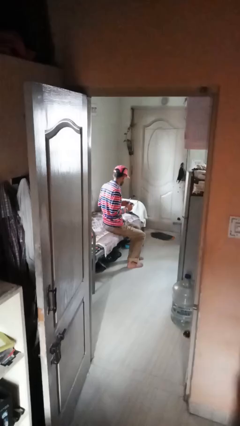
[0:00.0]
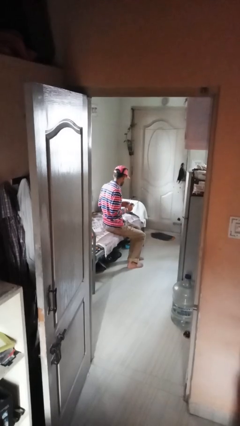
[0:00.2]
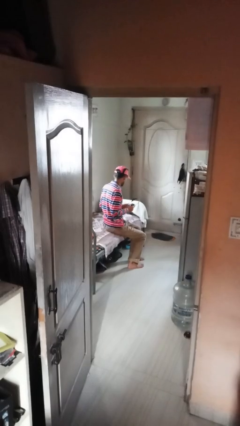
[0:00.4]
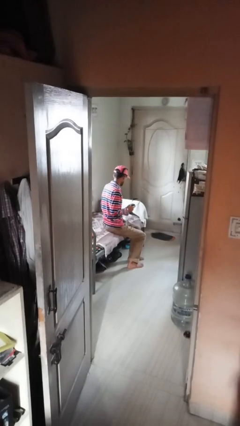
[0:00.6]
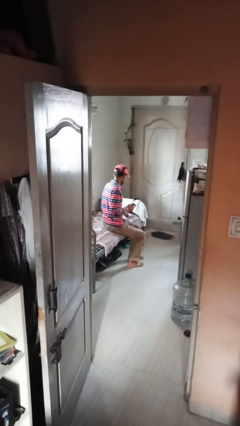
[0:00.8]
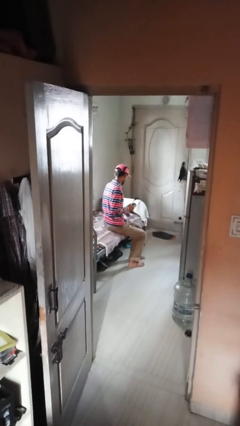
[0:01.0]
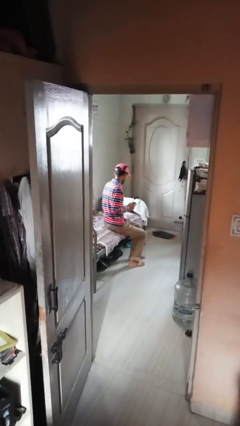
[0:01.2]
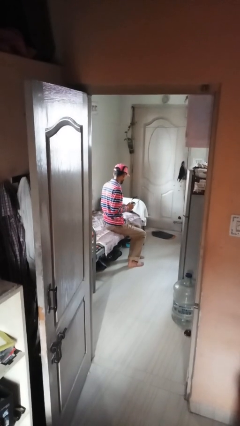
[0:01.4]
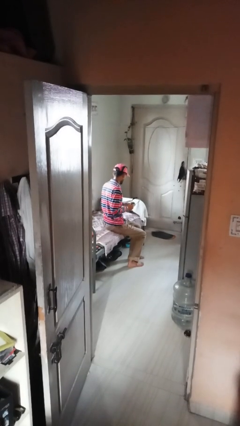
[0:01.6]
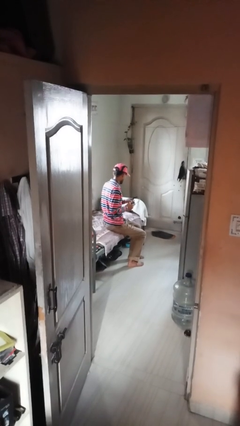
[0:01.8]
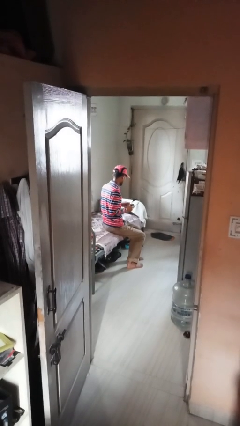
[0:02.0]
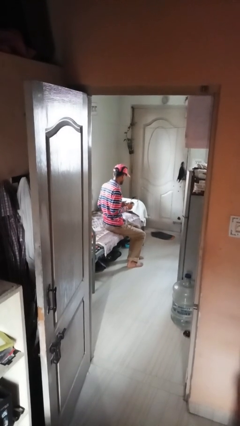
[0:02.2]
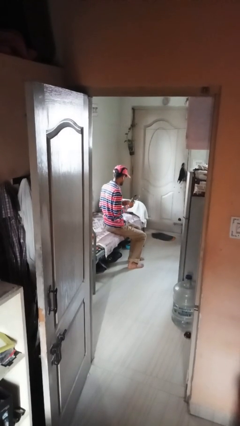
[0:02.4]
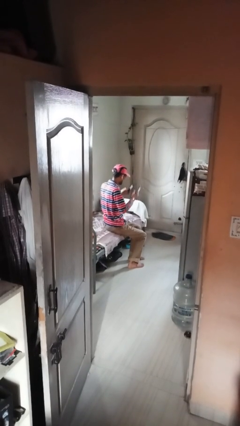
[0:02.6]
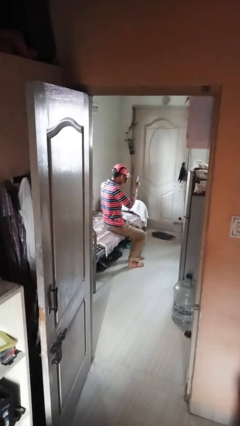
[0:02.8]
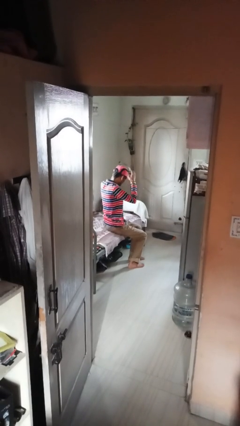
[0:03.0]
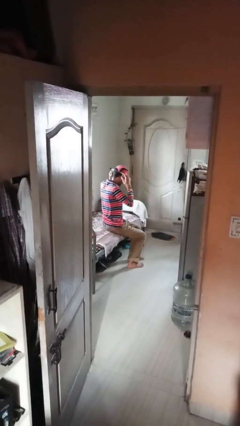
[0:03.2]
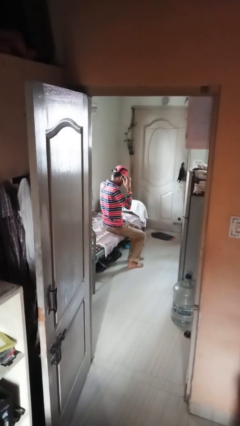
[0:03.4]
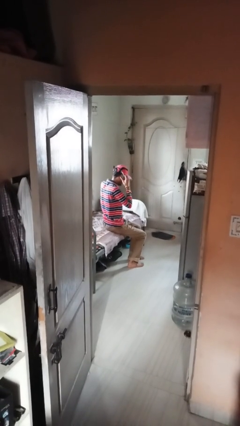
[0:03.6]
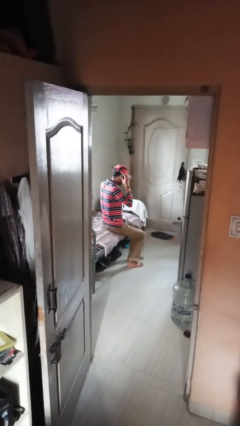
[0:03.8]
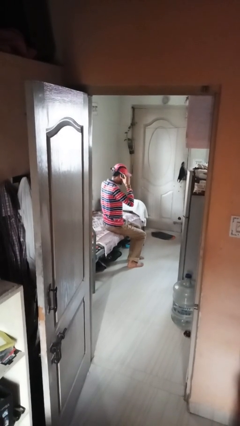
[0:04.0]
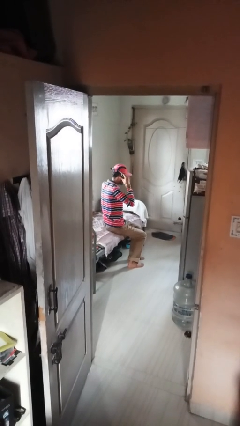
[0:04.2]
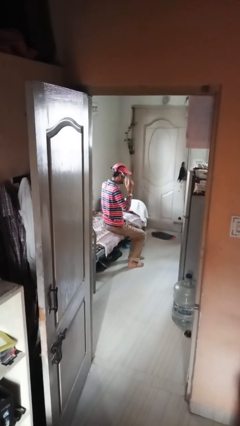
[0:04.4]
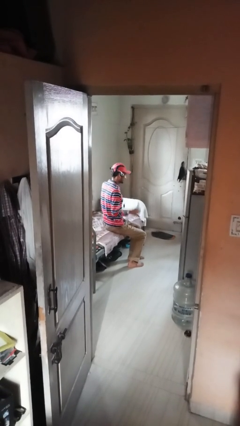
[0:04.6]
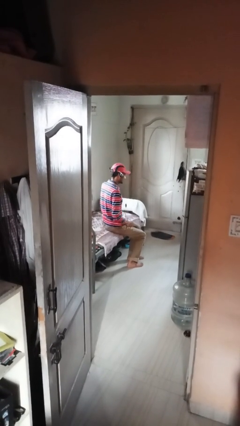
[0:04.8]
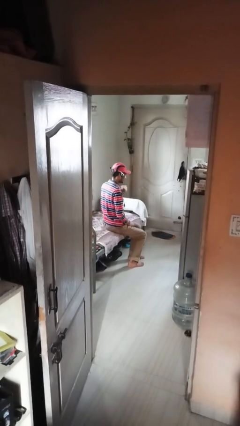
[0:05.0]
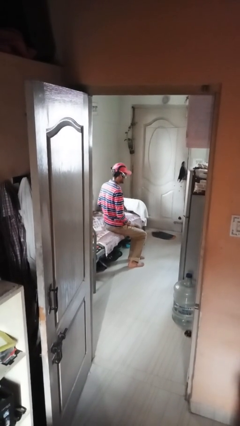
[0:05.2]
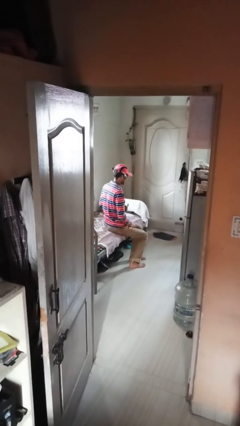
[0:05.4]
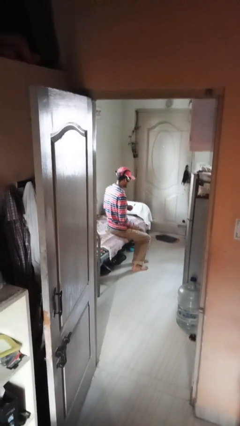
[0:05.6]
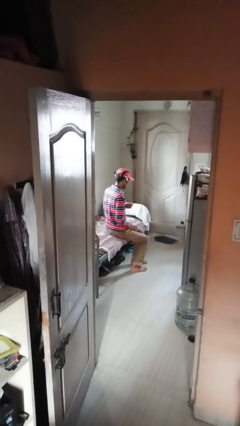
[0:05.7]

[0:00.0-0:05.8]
person puts on headphones

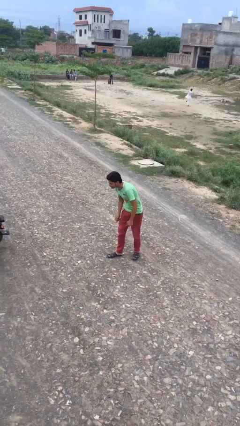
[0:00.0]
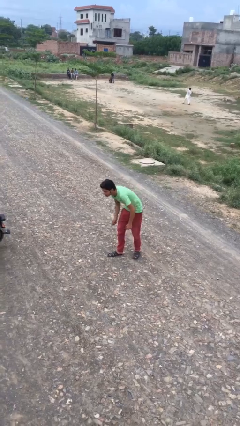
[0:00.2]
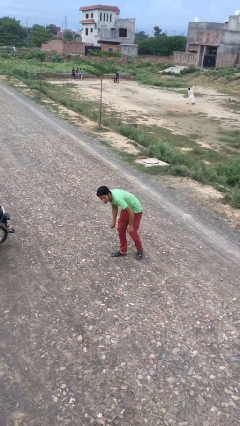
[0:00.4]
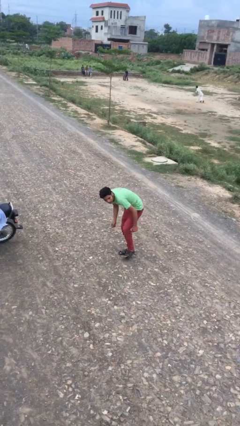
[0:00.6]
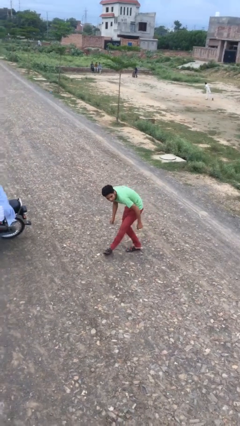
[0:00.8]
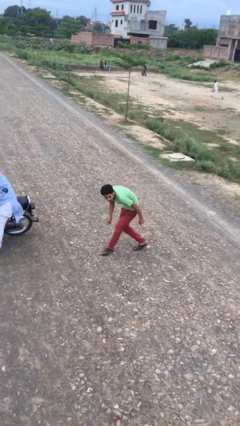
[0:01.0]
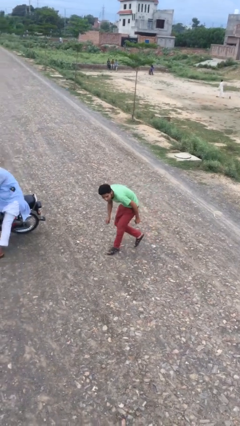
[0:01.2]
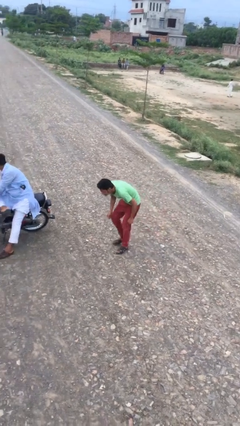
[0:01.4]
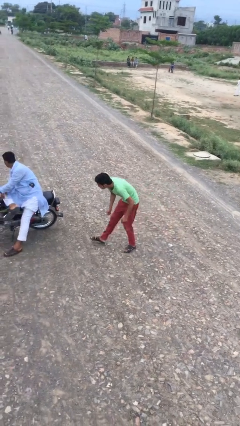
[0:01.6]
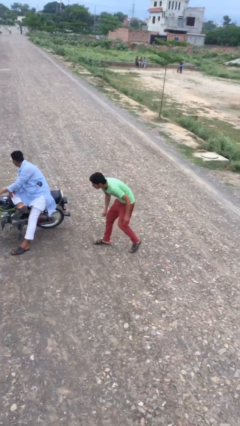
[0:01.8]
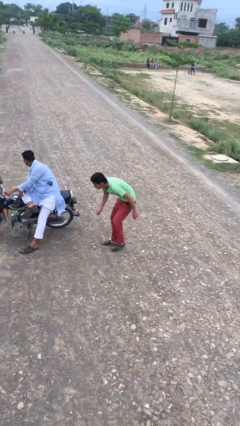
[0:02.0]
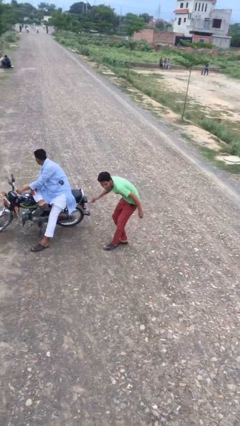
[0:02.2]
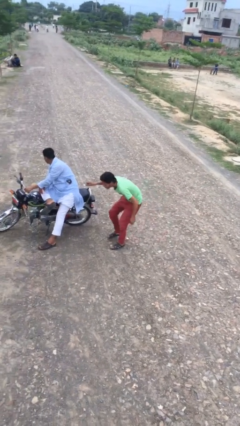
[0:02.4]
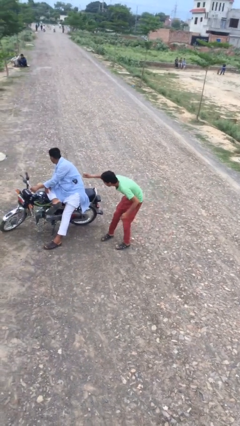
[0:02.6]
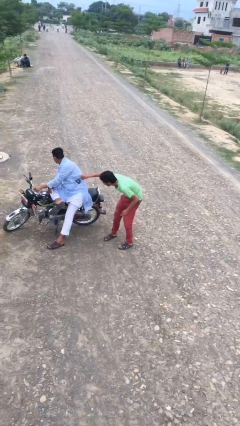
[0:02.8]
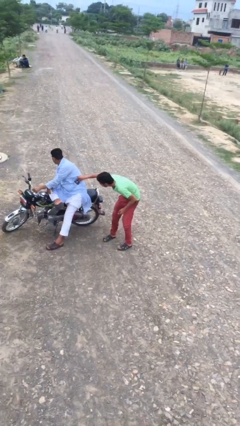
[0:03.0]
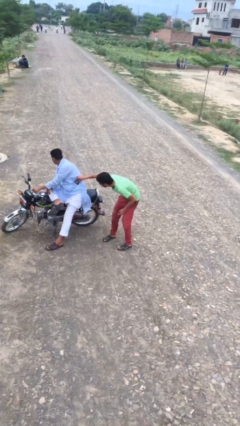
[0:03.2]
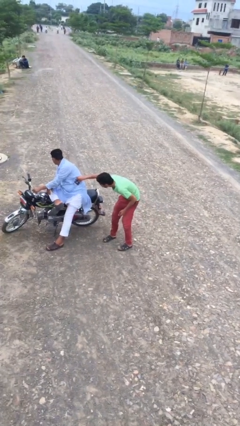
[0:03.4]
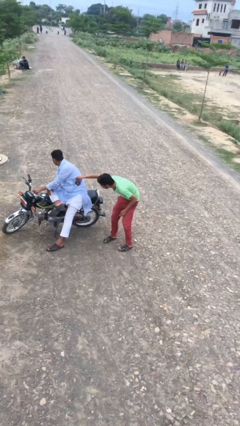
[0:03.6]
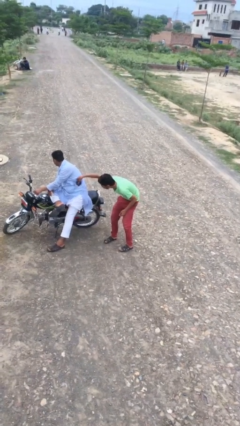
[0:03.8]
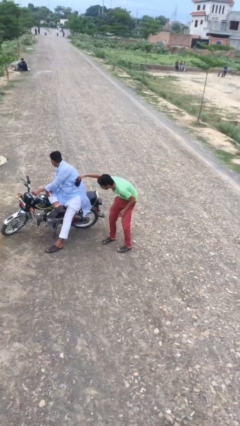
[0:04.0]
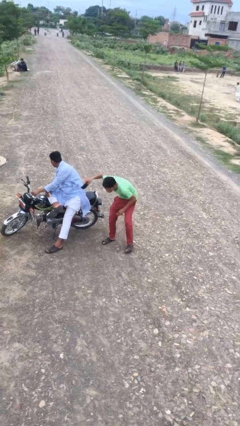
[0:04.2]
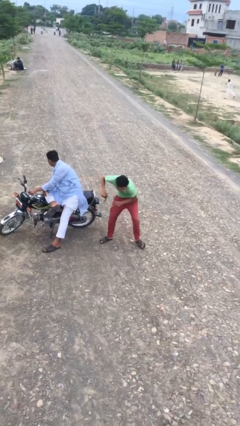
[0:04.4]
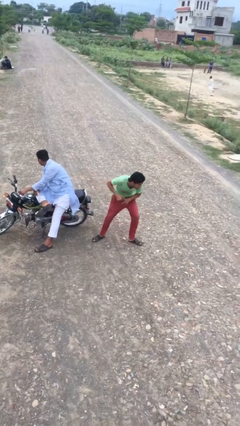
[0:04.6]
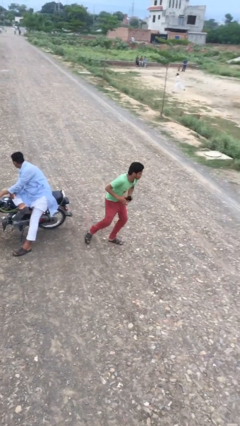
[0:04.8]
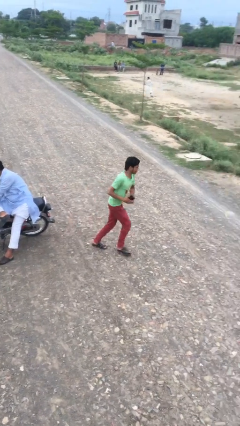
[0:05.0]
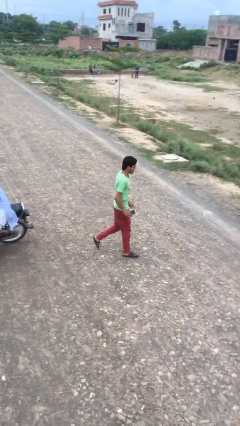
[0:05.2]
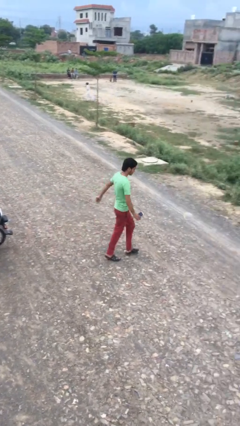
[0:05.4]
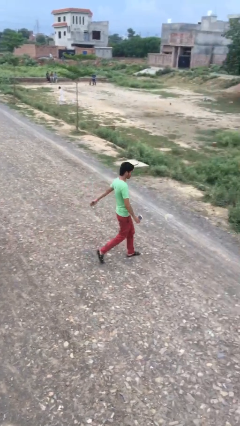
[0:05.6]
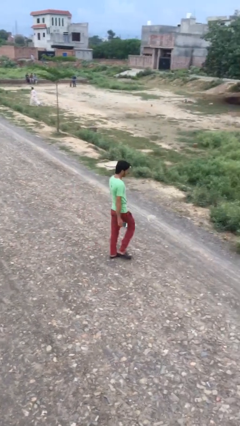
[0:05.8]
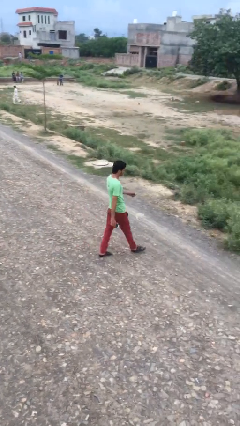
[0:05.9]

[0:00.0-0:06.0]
person steals object from person

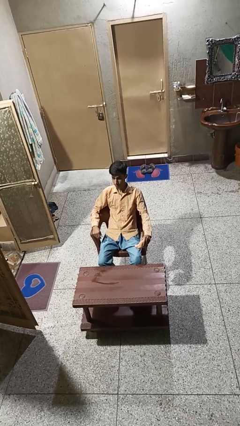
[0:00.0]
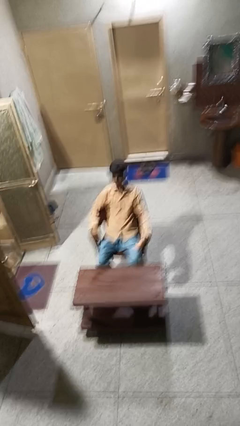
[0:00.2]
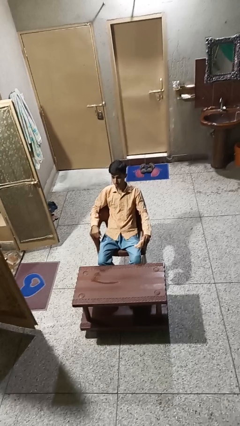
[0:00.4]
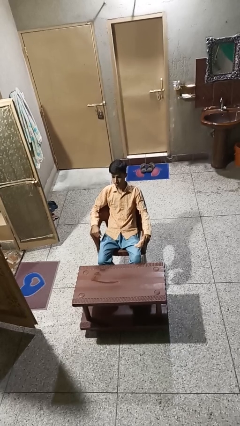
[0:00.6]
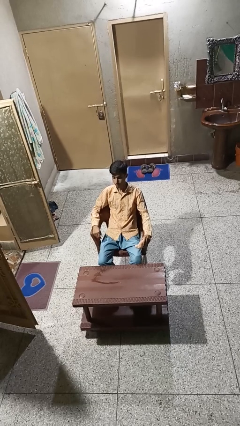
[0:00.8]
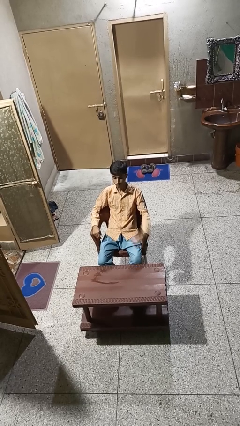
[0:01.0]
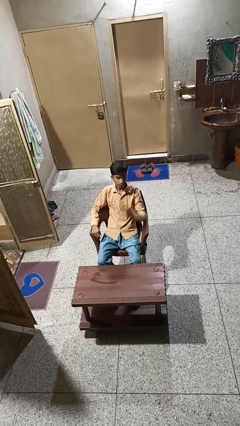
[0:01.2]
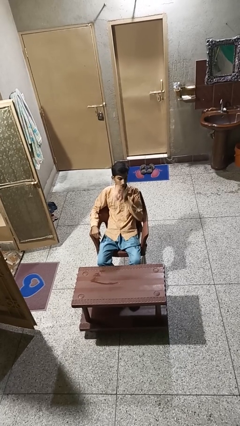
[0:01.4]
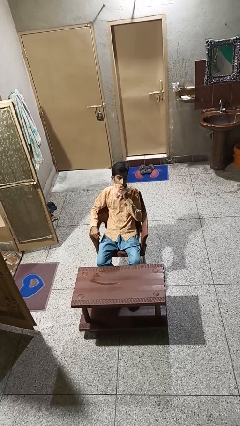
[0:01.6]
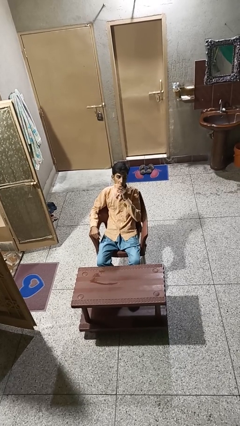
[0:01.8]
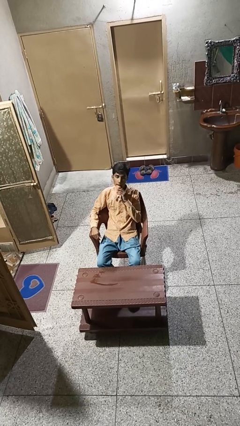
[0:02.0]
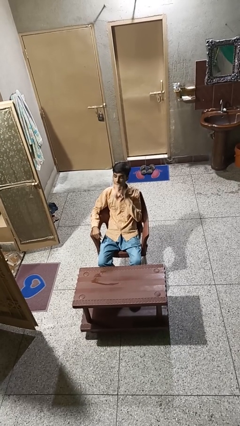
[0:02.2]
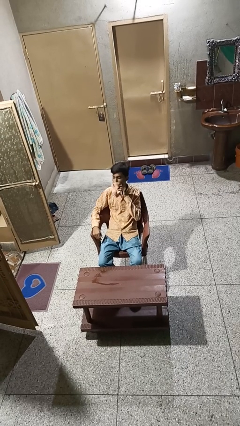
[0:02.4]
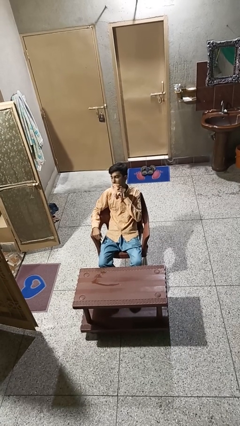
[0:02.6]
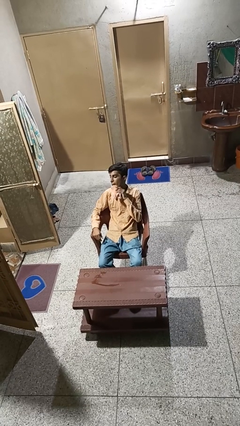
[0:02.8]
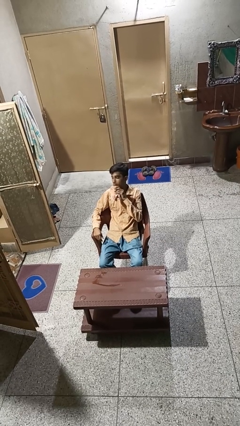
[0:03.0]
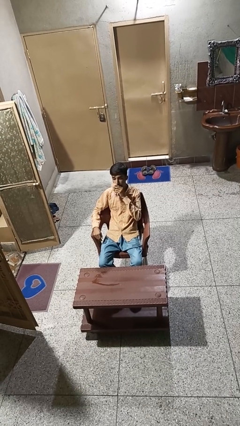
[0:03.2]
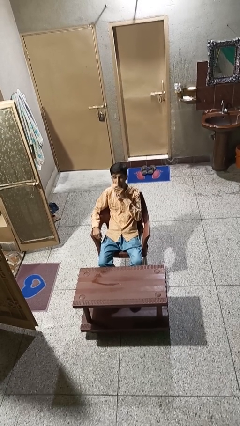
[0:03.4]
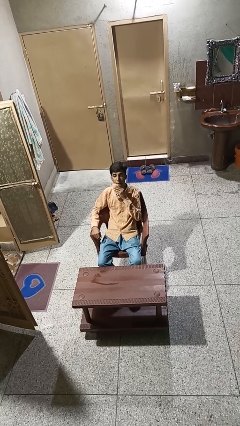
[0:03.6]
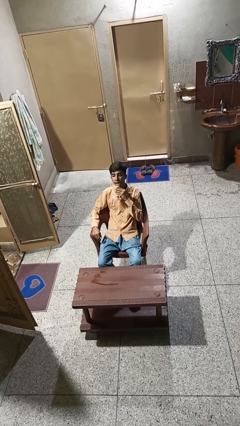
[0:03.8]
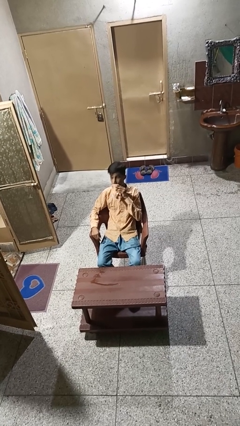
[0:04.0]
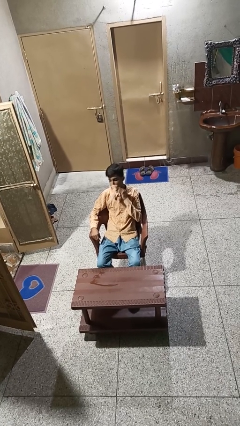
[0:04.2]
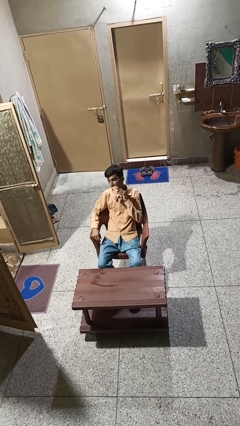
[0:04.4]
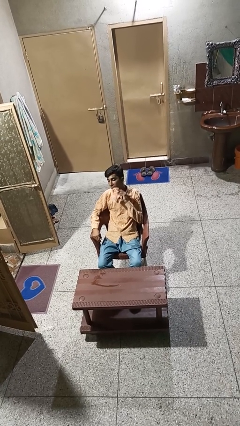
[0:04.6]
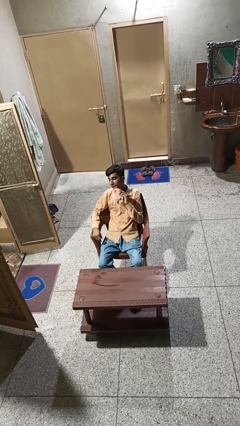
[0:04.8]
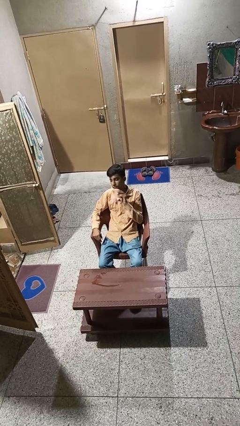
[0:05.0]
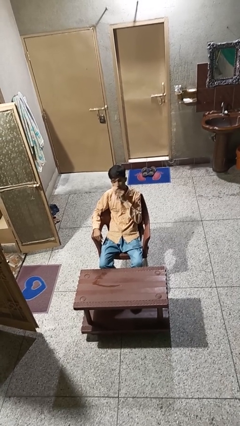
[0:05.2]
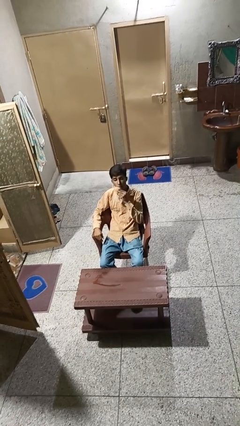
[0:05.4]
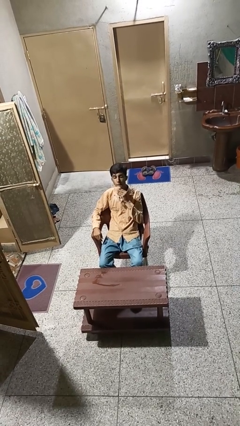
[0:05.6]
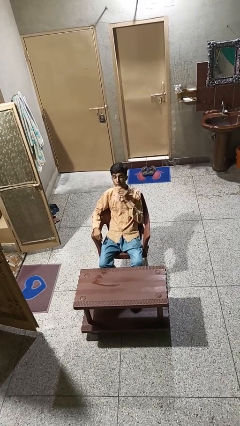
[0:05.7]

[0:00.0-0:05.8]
person wipes mouth with napkin

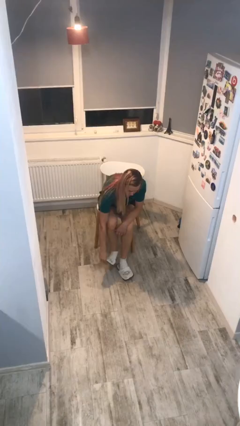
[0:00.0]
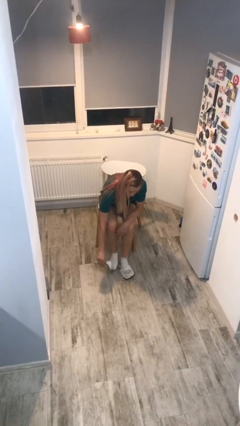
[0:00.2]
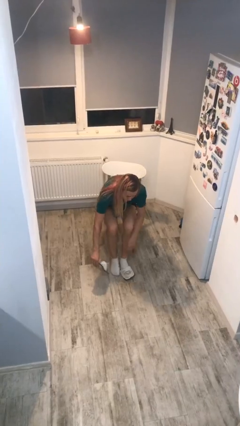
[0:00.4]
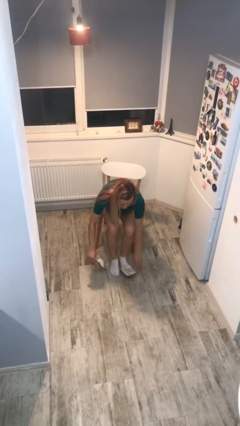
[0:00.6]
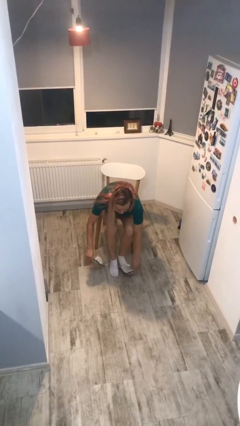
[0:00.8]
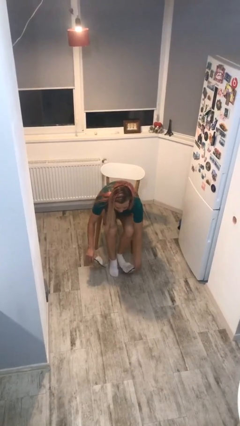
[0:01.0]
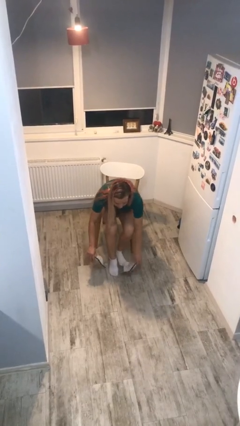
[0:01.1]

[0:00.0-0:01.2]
person takes off shoes
